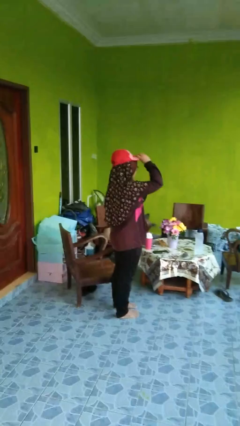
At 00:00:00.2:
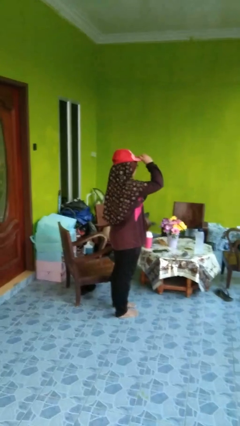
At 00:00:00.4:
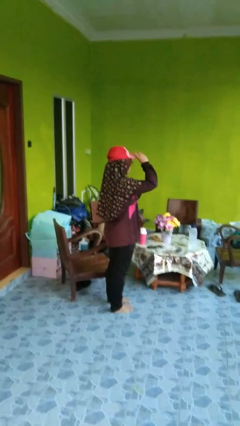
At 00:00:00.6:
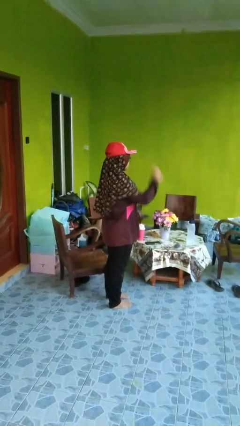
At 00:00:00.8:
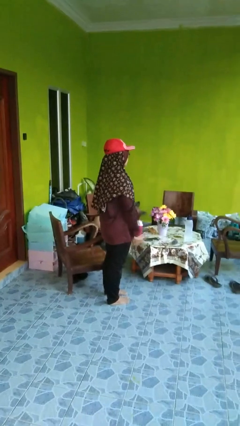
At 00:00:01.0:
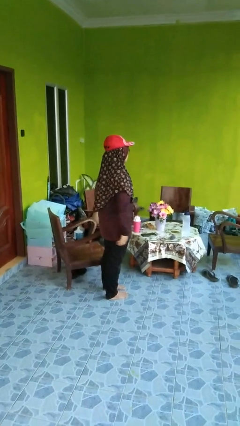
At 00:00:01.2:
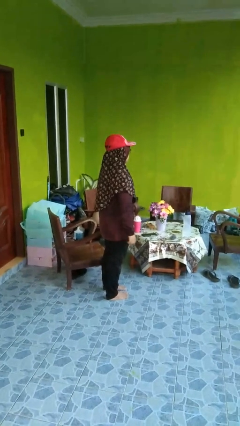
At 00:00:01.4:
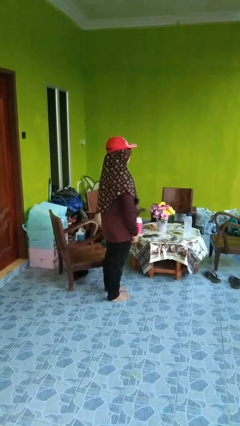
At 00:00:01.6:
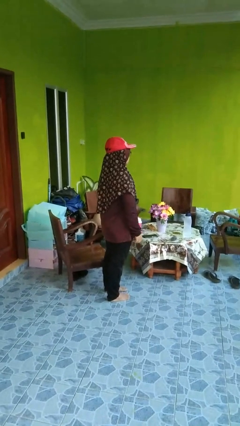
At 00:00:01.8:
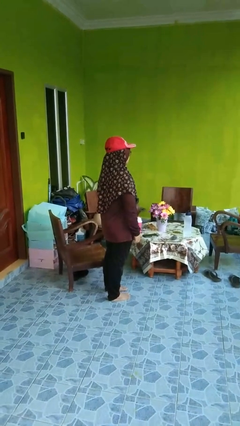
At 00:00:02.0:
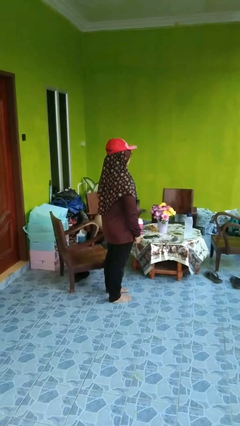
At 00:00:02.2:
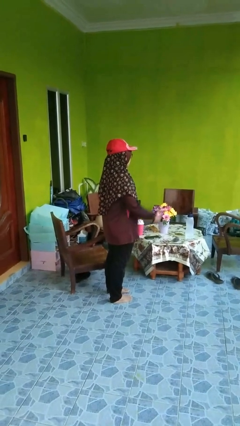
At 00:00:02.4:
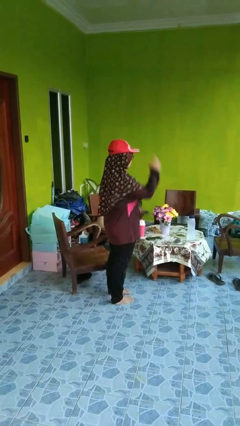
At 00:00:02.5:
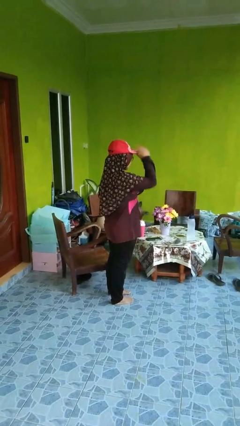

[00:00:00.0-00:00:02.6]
person puts on hat

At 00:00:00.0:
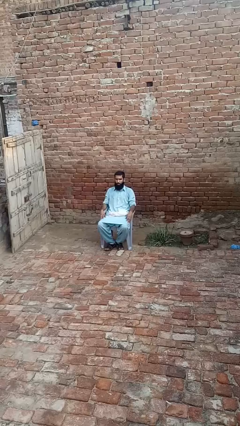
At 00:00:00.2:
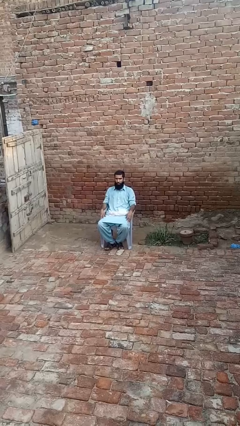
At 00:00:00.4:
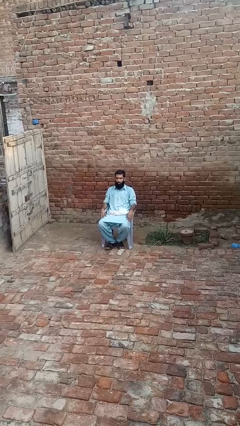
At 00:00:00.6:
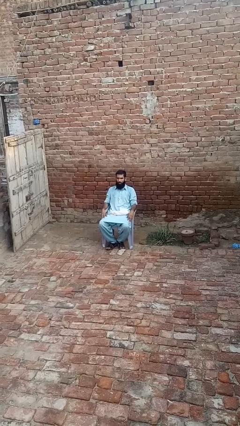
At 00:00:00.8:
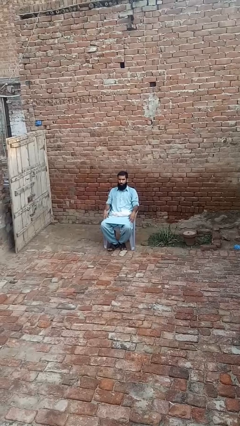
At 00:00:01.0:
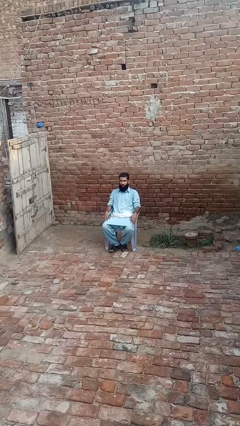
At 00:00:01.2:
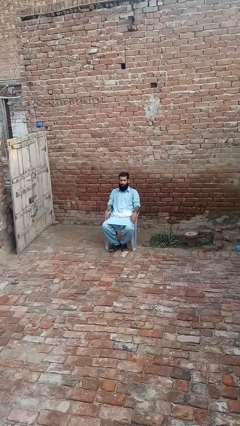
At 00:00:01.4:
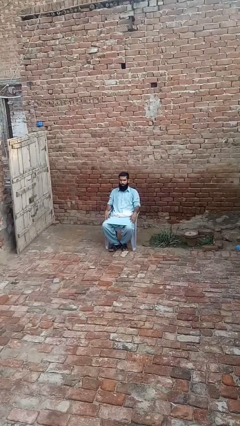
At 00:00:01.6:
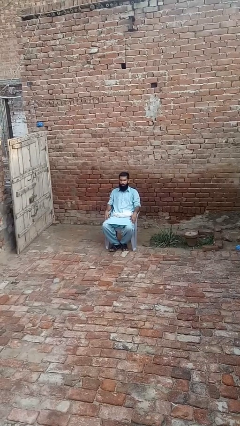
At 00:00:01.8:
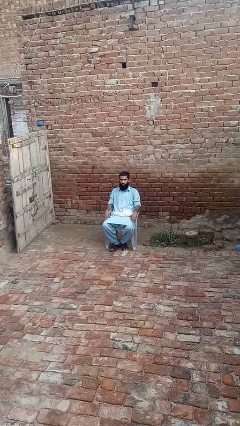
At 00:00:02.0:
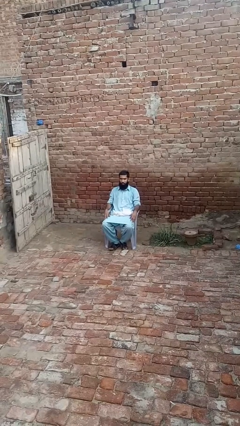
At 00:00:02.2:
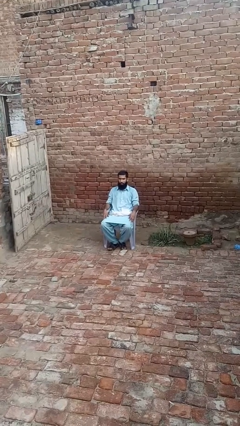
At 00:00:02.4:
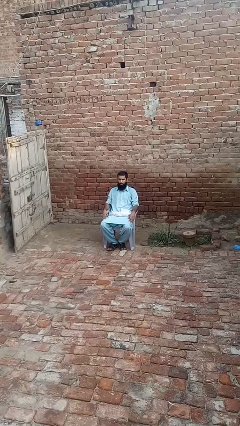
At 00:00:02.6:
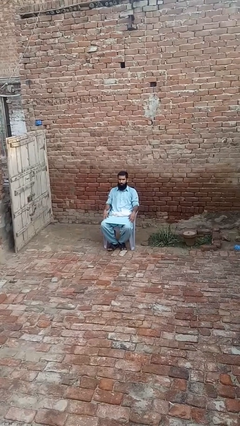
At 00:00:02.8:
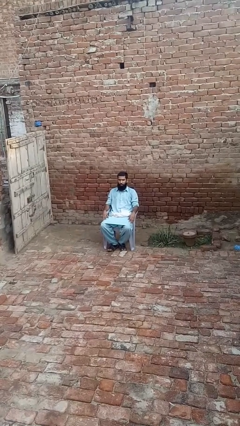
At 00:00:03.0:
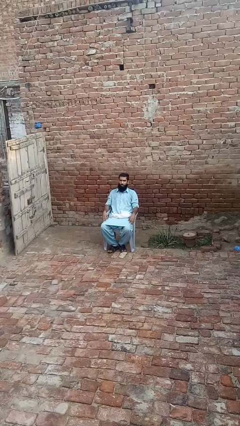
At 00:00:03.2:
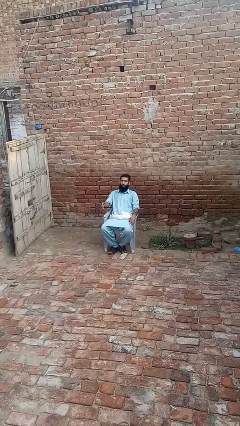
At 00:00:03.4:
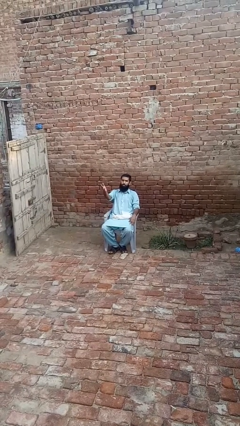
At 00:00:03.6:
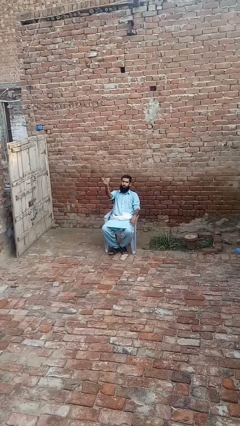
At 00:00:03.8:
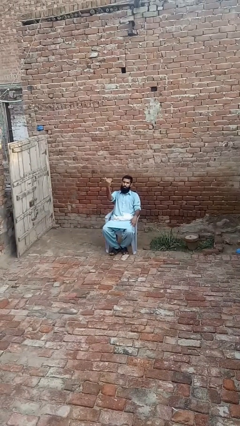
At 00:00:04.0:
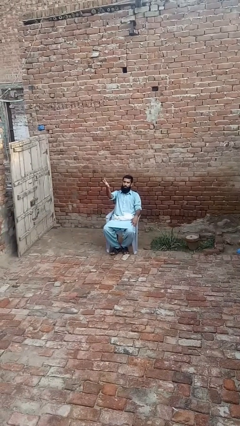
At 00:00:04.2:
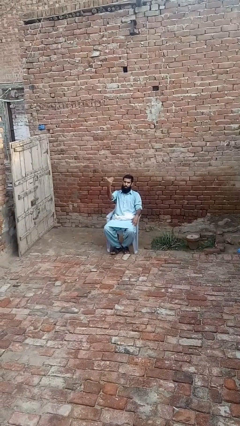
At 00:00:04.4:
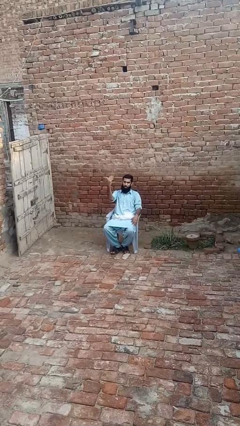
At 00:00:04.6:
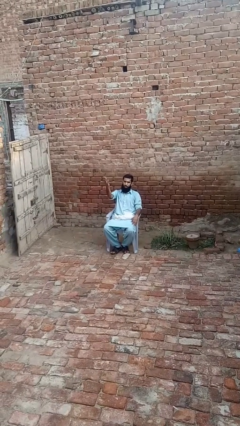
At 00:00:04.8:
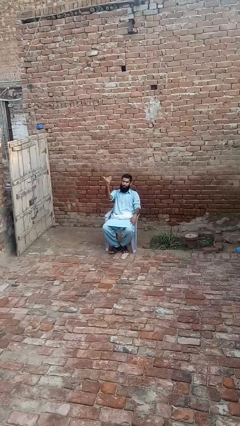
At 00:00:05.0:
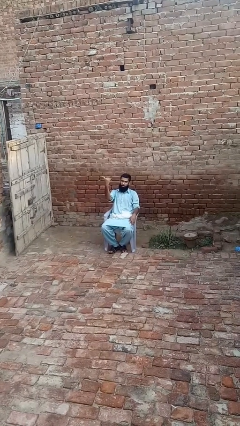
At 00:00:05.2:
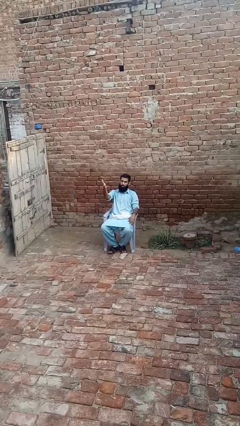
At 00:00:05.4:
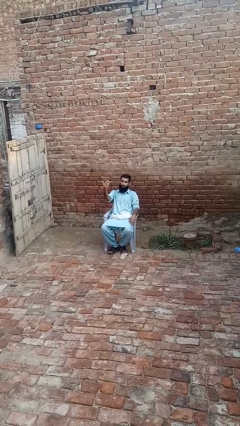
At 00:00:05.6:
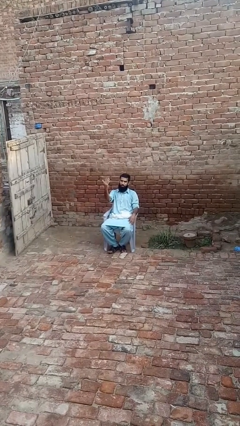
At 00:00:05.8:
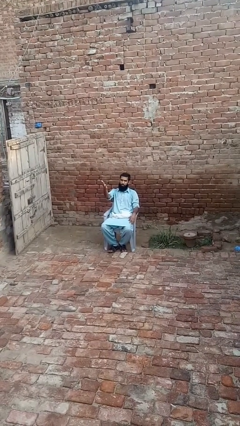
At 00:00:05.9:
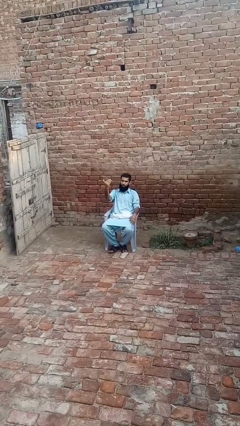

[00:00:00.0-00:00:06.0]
person gestures come here

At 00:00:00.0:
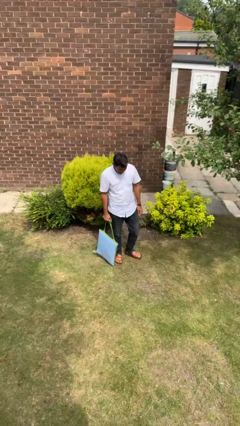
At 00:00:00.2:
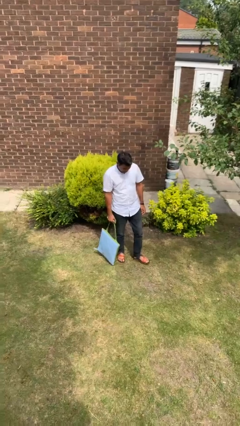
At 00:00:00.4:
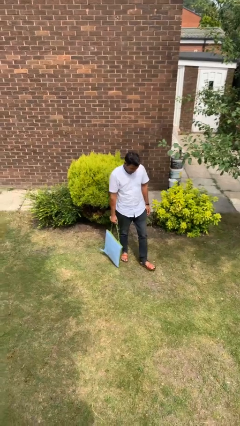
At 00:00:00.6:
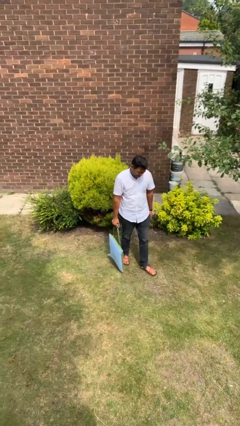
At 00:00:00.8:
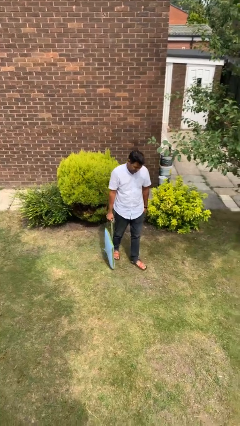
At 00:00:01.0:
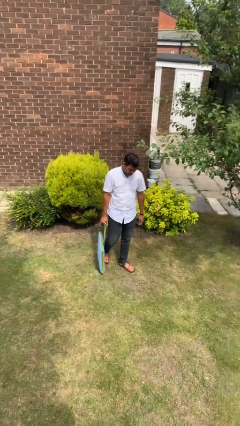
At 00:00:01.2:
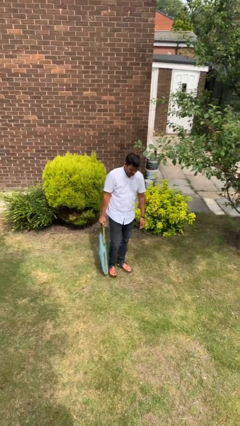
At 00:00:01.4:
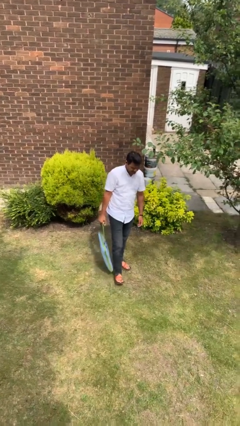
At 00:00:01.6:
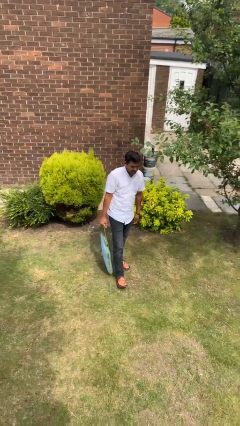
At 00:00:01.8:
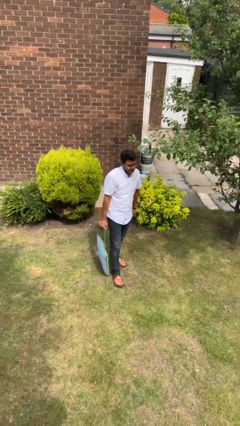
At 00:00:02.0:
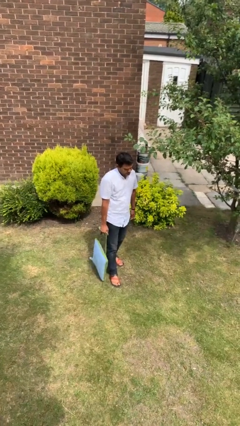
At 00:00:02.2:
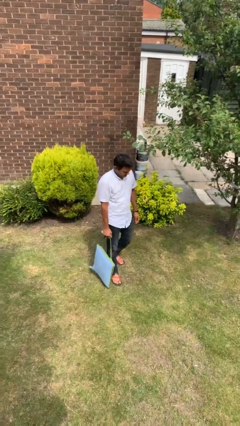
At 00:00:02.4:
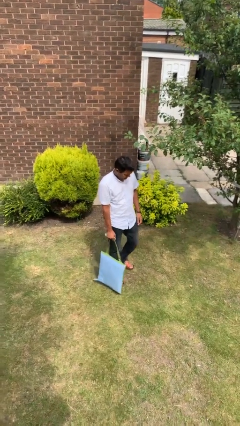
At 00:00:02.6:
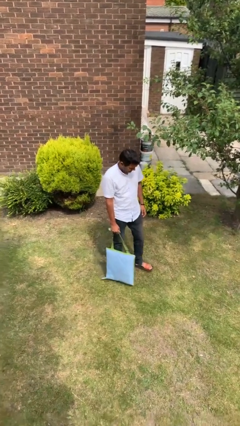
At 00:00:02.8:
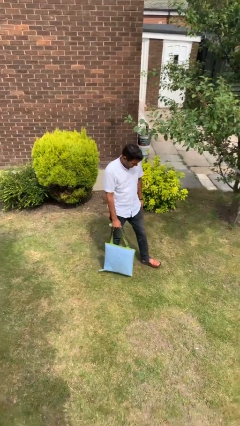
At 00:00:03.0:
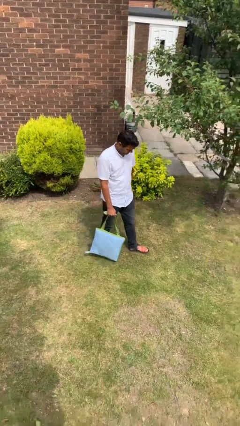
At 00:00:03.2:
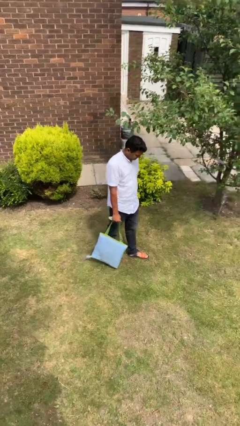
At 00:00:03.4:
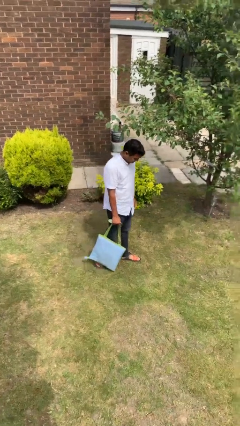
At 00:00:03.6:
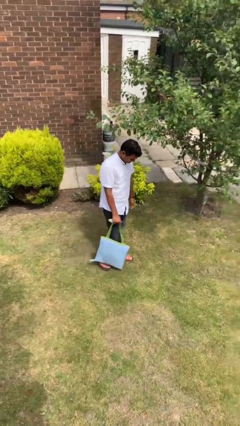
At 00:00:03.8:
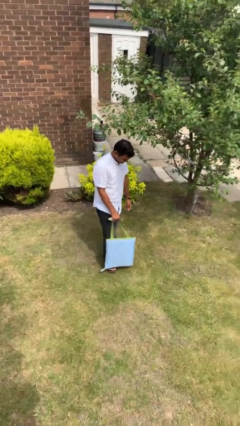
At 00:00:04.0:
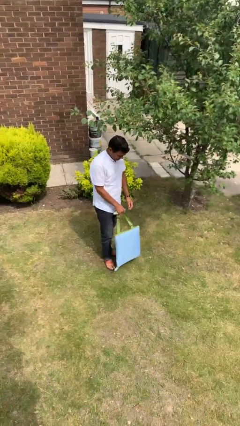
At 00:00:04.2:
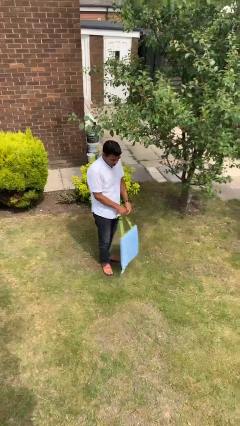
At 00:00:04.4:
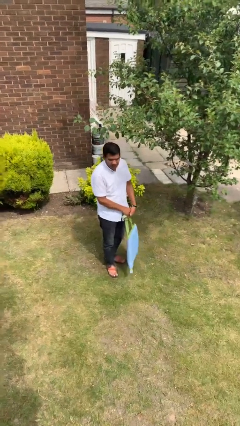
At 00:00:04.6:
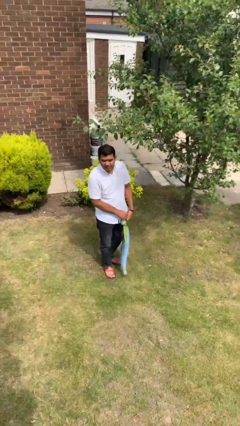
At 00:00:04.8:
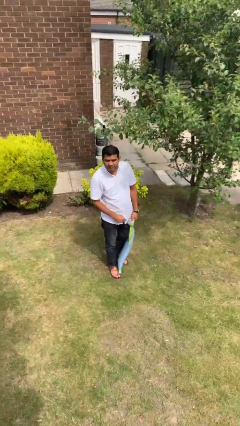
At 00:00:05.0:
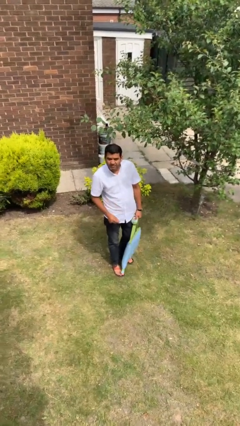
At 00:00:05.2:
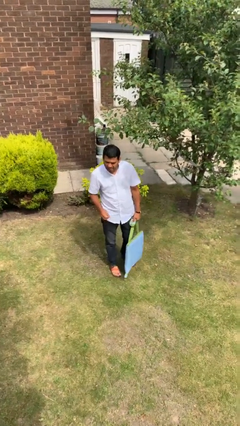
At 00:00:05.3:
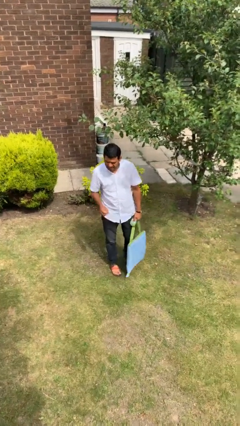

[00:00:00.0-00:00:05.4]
person carries groceries

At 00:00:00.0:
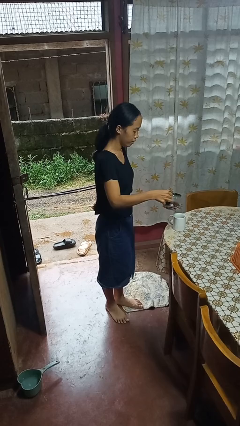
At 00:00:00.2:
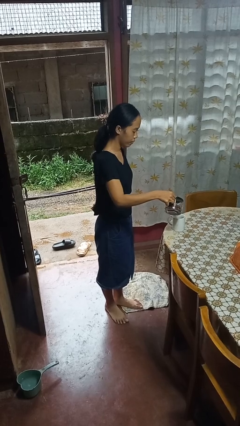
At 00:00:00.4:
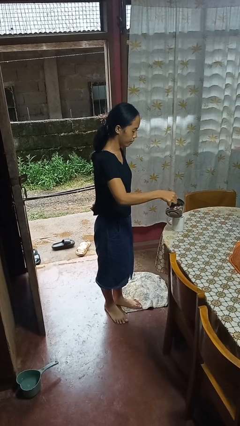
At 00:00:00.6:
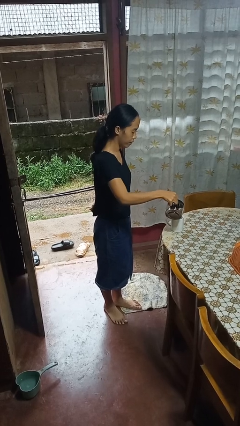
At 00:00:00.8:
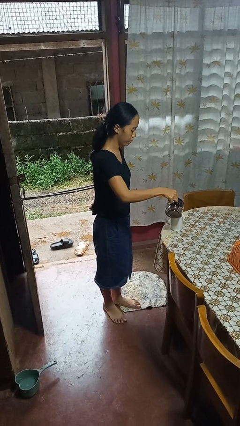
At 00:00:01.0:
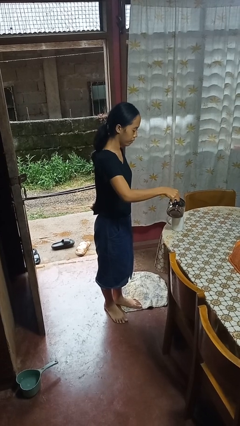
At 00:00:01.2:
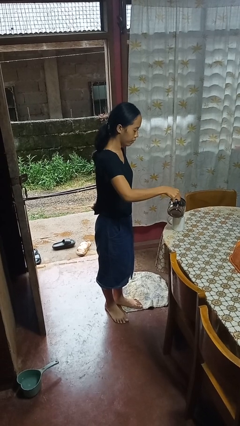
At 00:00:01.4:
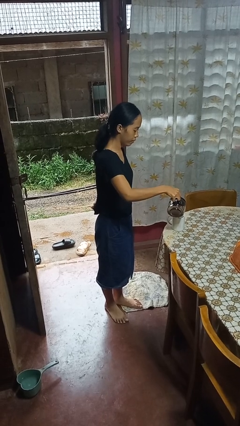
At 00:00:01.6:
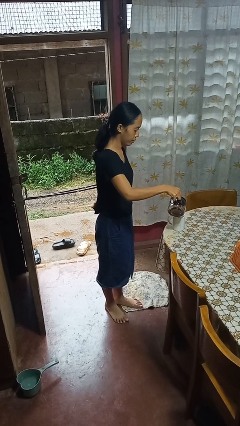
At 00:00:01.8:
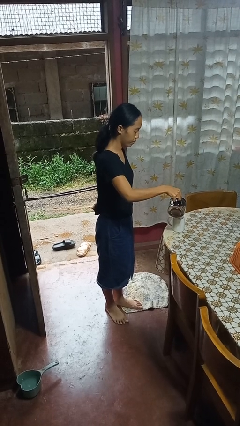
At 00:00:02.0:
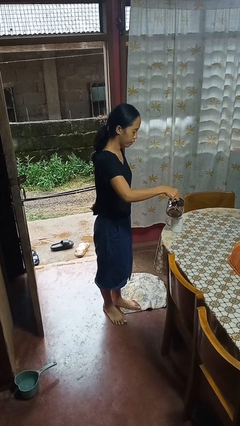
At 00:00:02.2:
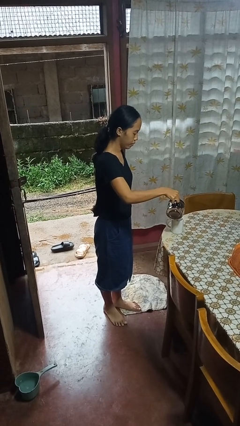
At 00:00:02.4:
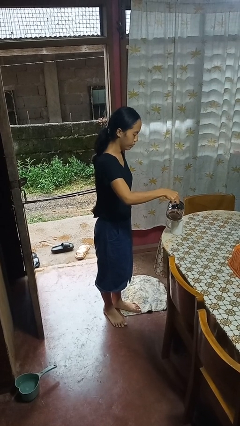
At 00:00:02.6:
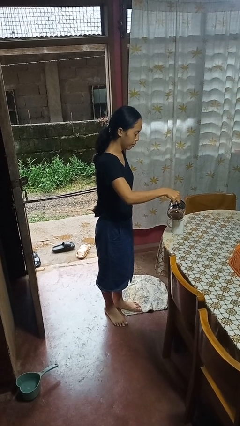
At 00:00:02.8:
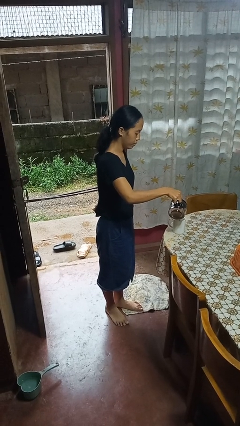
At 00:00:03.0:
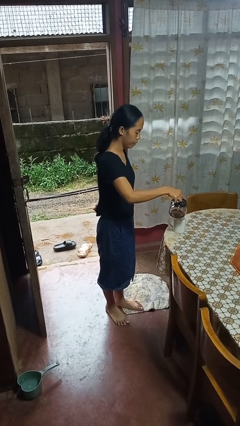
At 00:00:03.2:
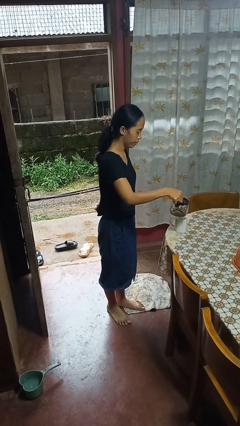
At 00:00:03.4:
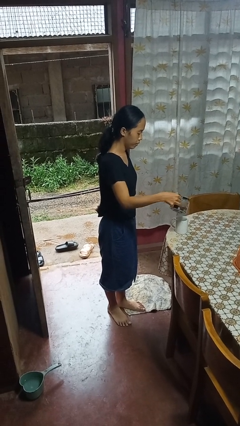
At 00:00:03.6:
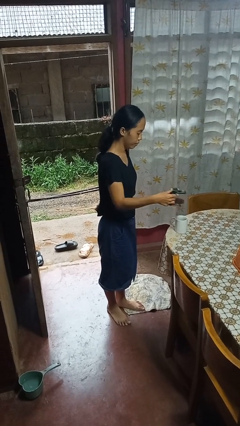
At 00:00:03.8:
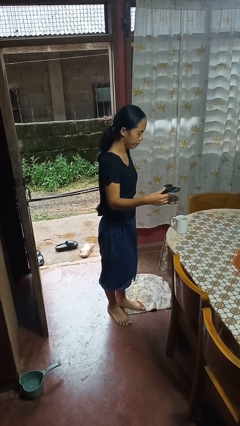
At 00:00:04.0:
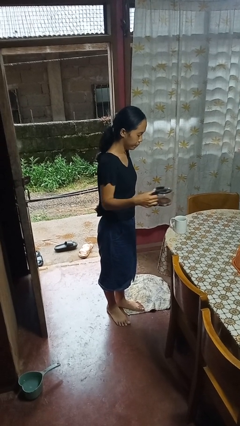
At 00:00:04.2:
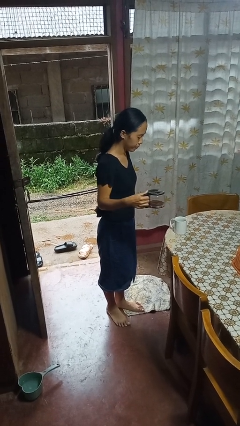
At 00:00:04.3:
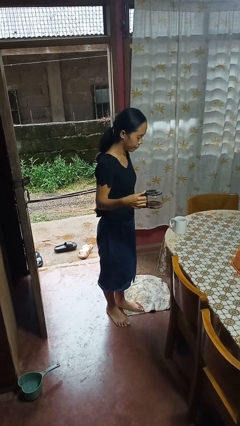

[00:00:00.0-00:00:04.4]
person pours coffee into mug
